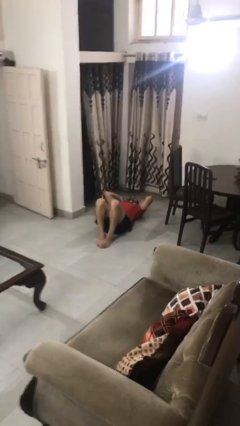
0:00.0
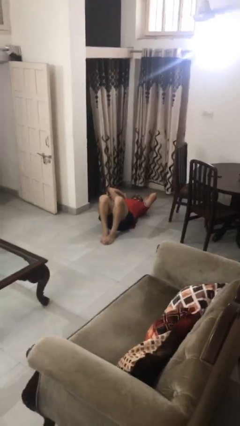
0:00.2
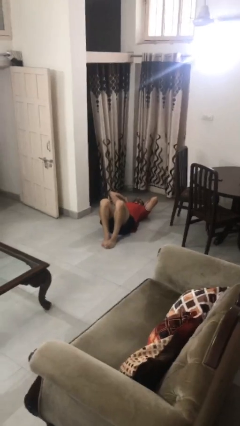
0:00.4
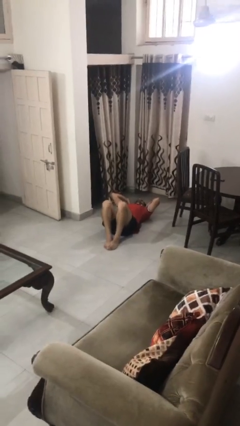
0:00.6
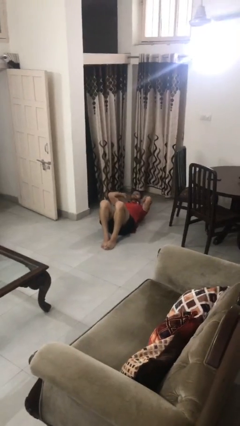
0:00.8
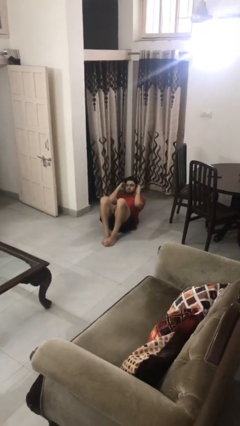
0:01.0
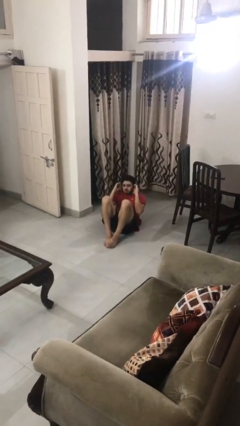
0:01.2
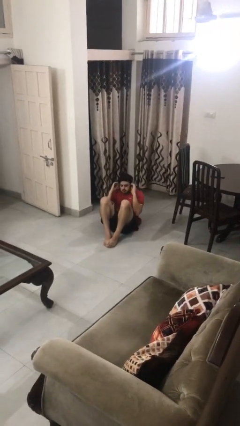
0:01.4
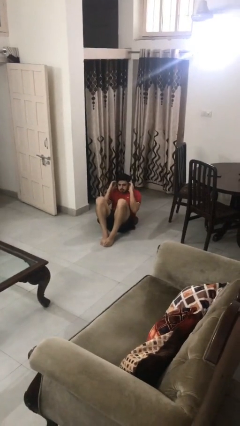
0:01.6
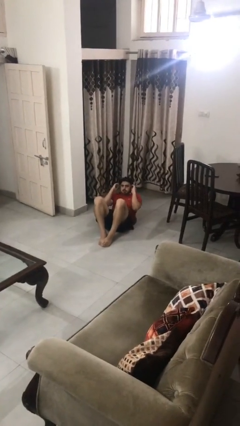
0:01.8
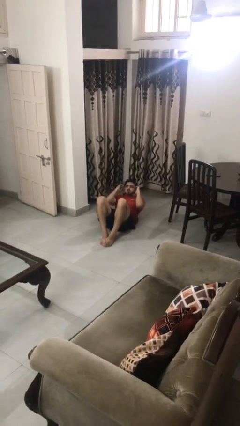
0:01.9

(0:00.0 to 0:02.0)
person exercises with situp

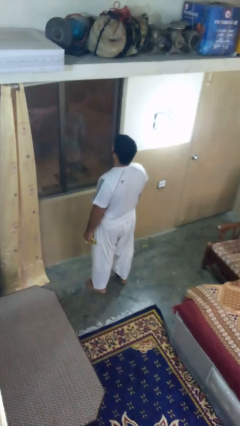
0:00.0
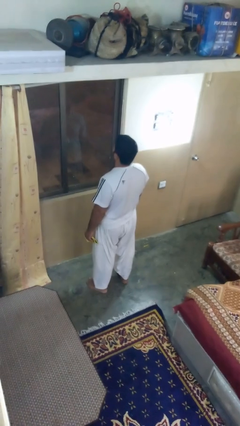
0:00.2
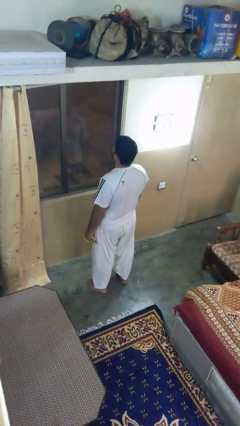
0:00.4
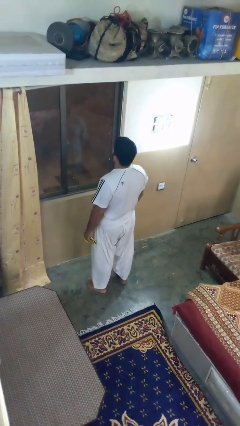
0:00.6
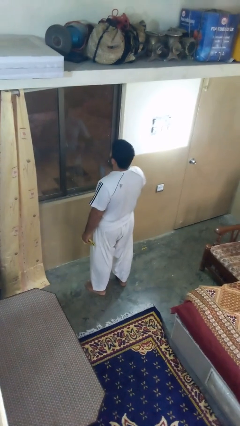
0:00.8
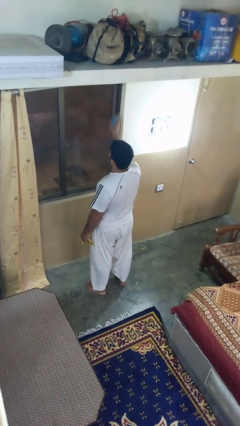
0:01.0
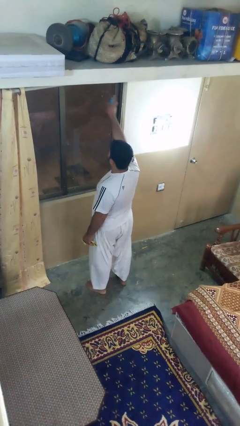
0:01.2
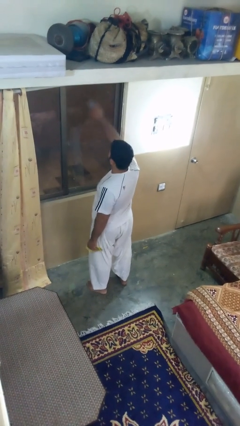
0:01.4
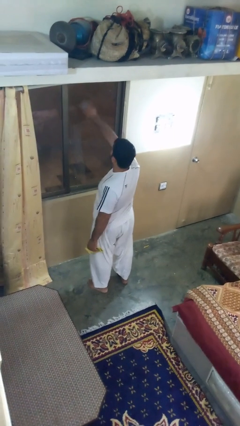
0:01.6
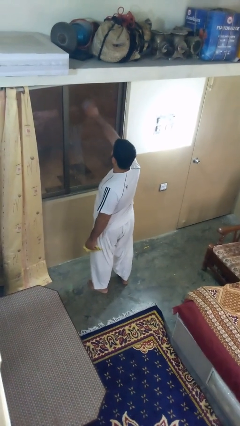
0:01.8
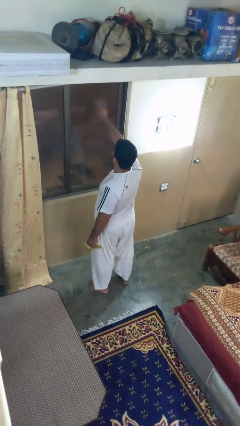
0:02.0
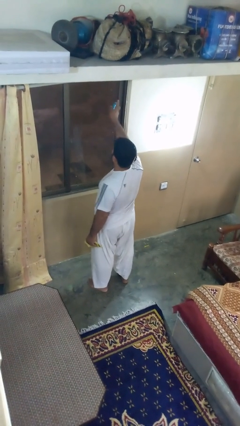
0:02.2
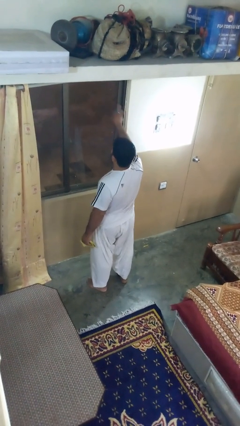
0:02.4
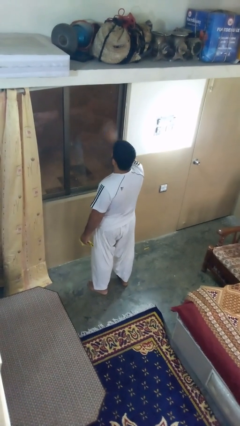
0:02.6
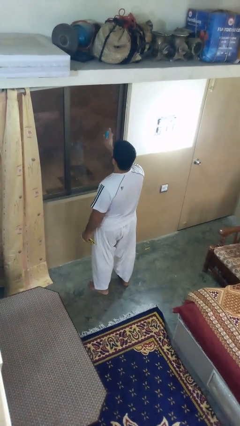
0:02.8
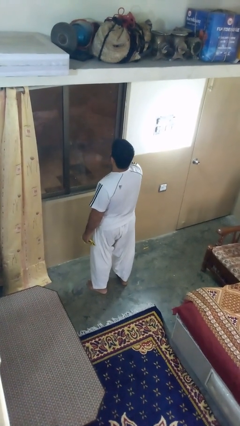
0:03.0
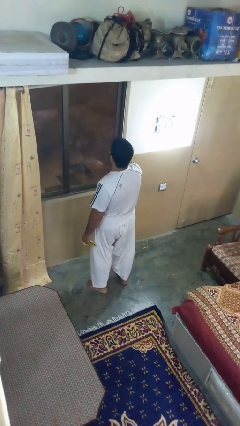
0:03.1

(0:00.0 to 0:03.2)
person sprays from bottle

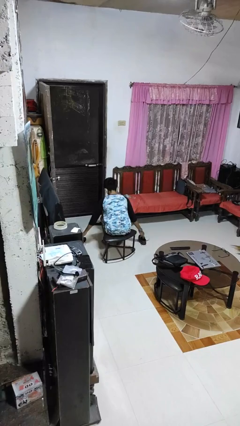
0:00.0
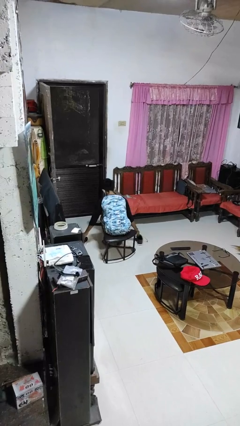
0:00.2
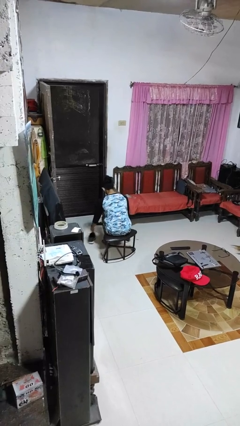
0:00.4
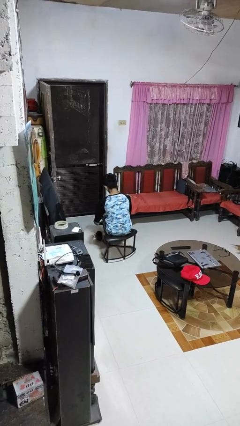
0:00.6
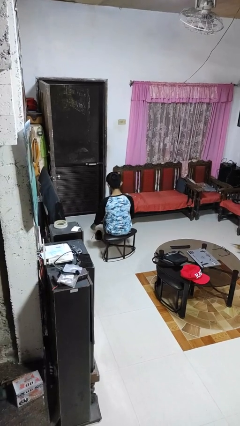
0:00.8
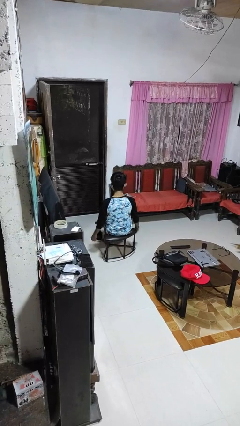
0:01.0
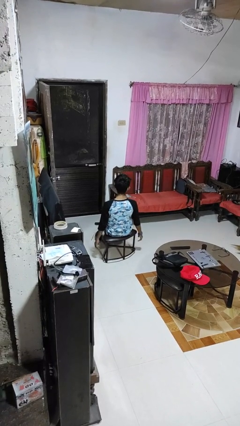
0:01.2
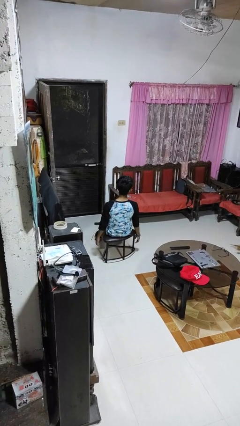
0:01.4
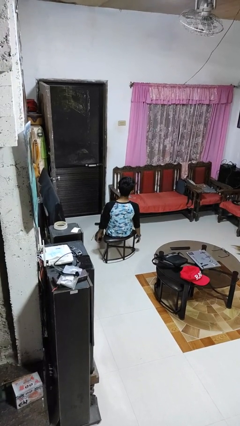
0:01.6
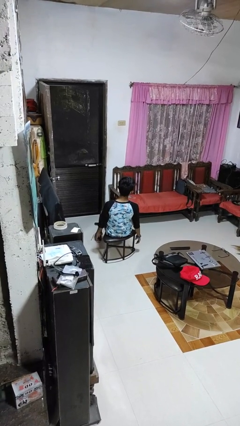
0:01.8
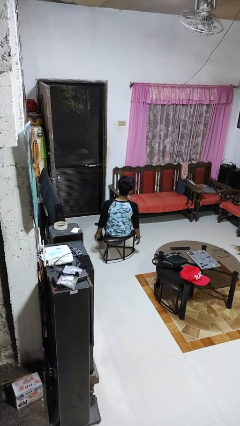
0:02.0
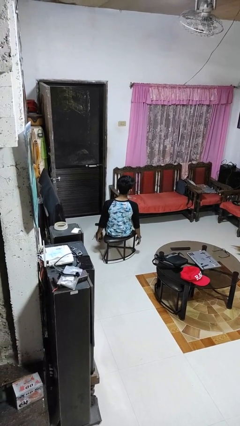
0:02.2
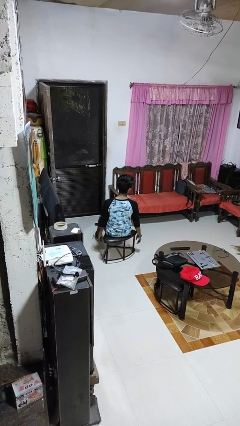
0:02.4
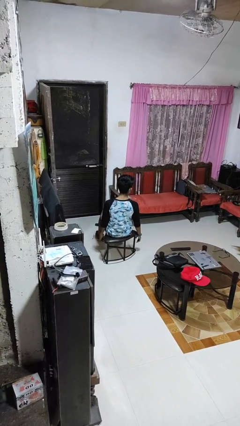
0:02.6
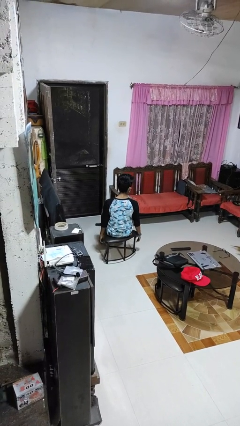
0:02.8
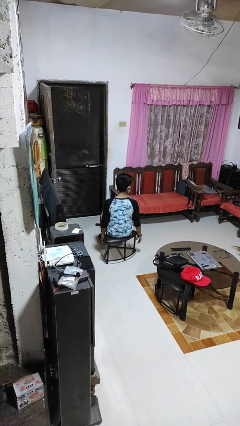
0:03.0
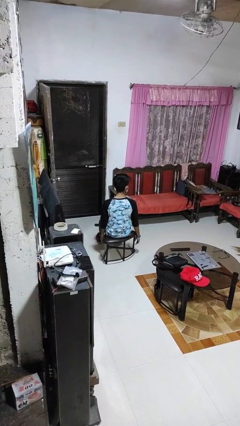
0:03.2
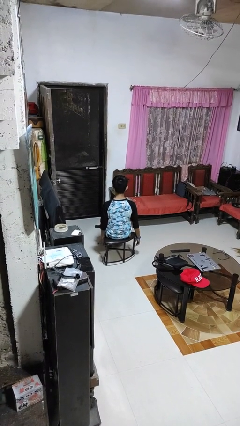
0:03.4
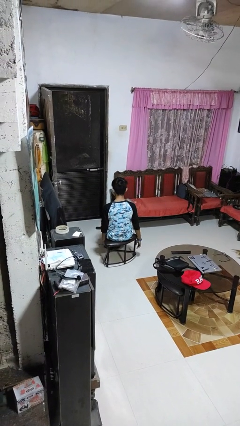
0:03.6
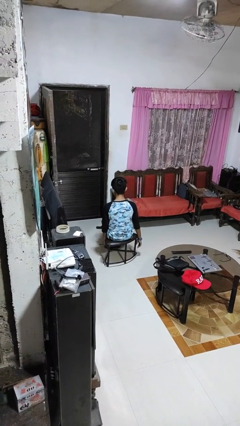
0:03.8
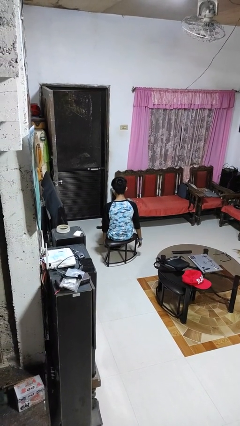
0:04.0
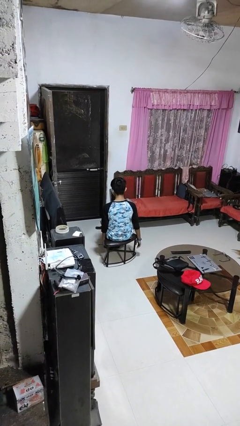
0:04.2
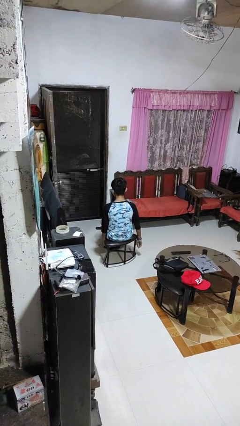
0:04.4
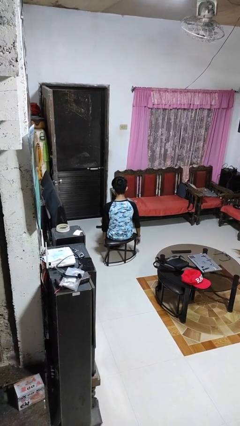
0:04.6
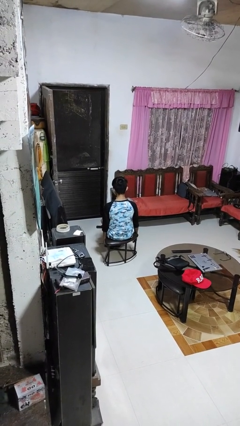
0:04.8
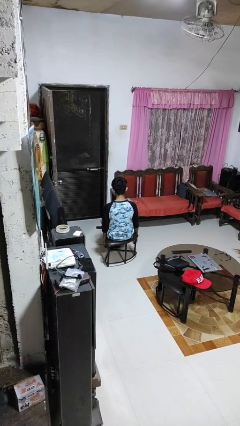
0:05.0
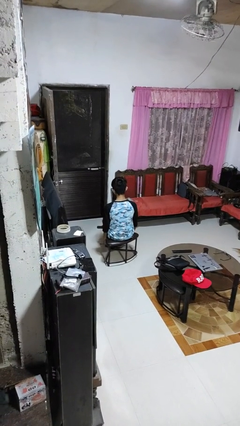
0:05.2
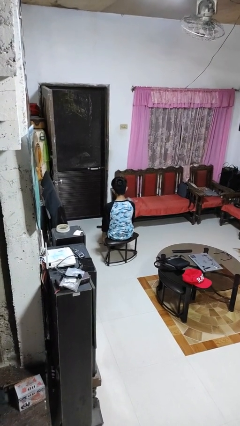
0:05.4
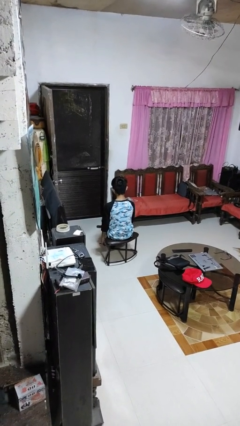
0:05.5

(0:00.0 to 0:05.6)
person puts on shoes

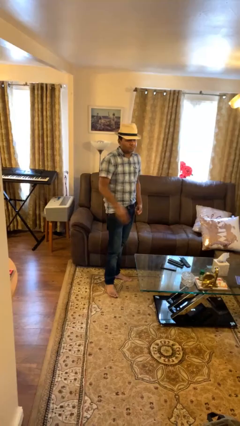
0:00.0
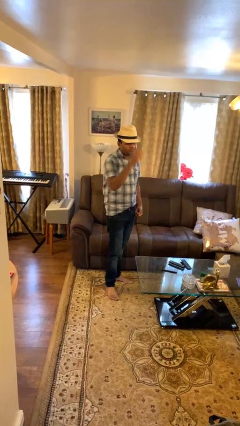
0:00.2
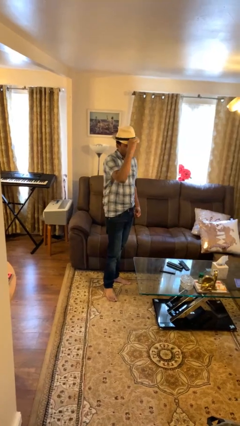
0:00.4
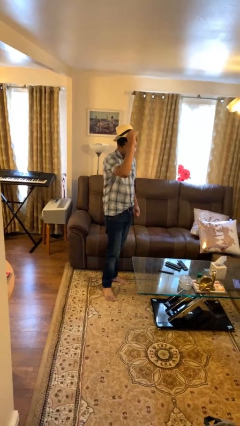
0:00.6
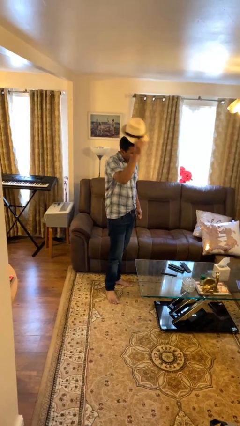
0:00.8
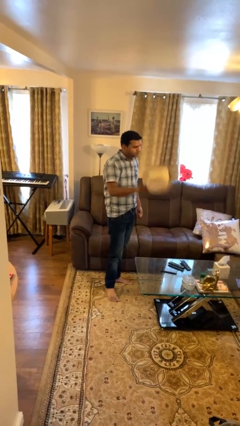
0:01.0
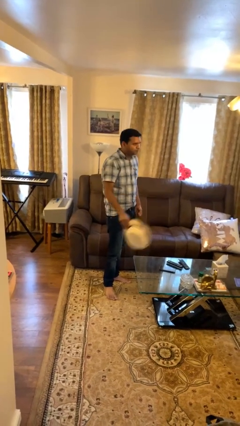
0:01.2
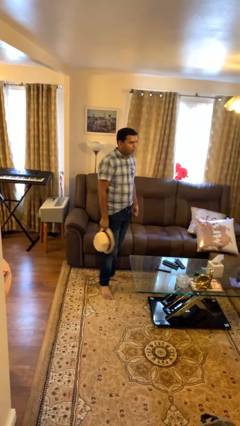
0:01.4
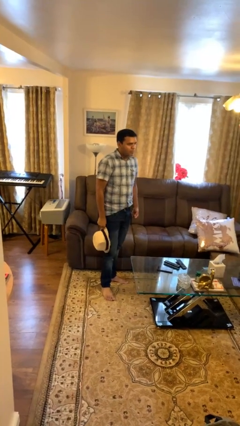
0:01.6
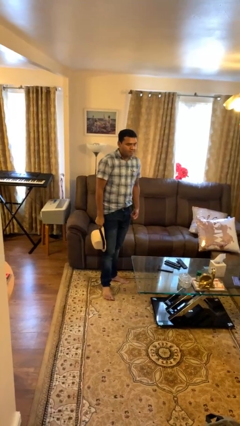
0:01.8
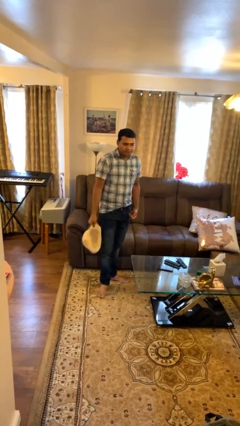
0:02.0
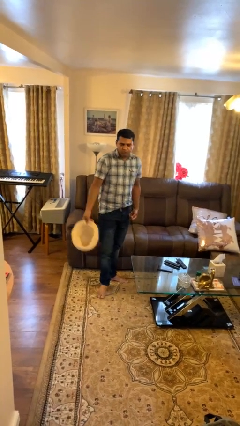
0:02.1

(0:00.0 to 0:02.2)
person takes off hat

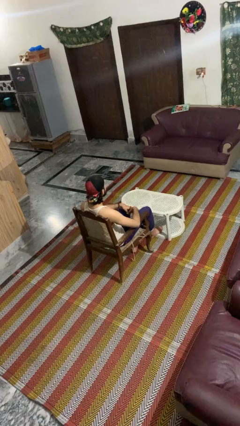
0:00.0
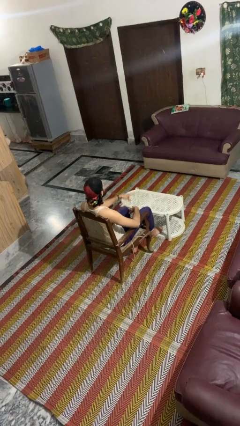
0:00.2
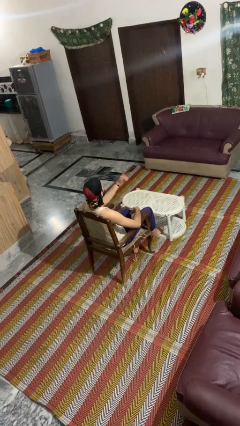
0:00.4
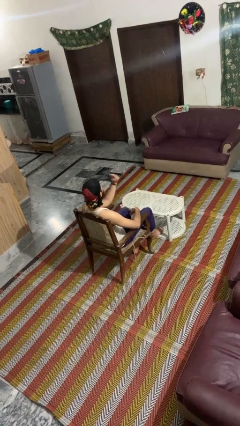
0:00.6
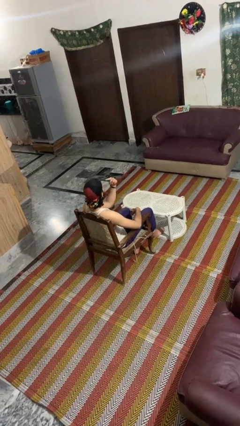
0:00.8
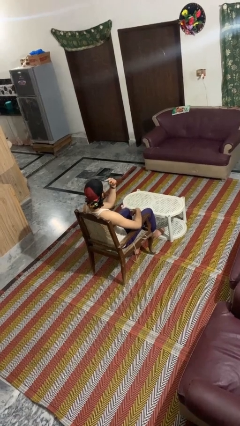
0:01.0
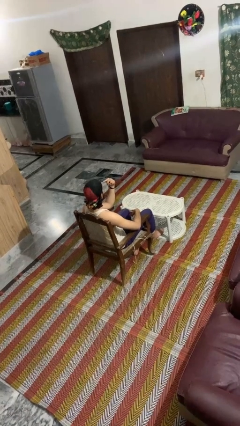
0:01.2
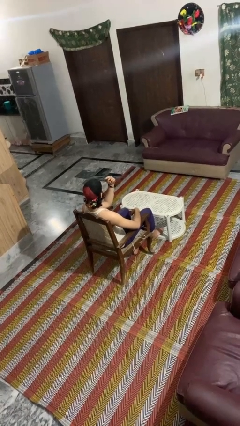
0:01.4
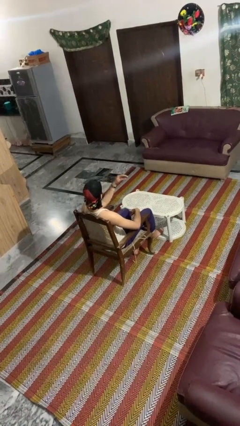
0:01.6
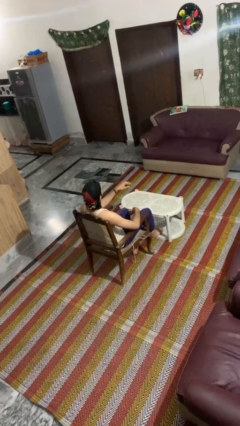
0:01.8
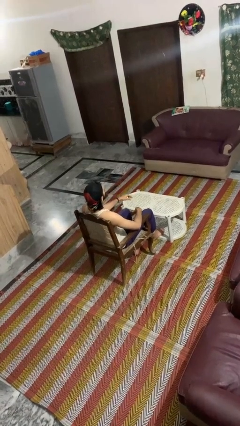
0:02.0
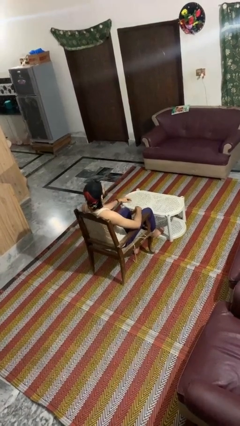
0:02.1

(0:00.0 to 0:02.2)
person gestures watch closely

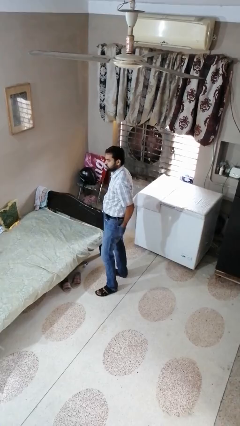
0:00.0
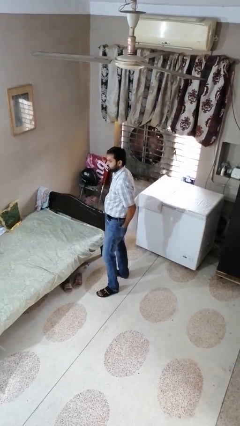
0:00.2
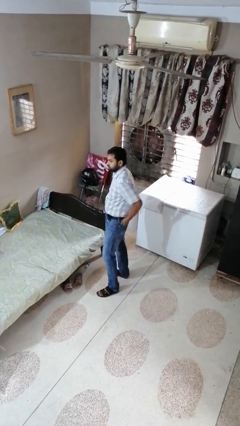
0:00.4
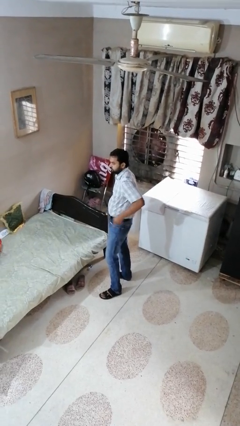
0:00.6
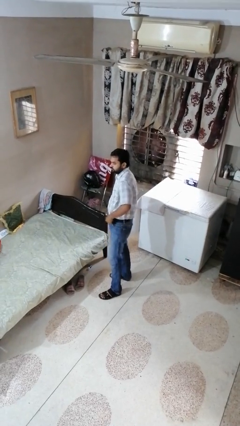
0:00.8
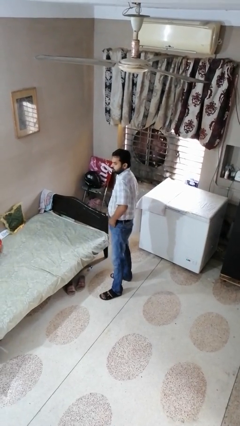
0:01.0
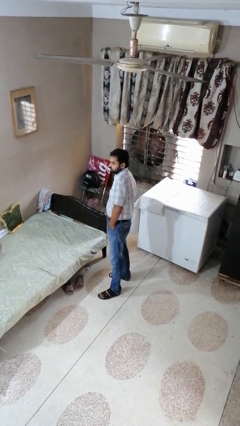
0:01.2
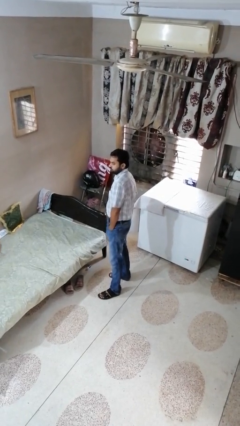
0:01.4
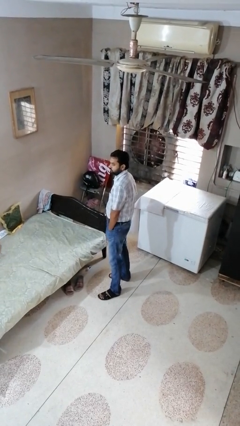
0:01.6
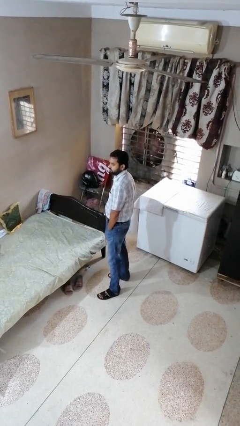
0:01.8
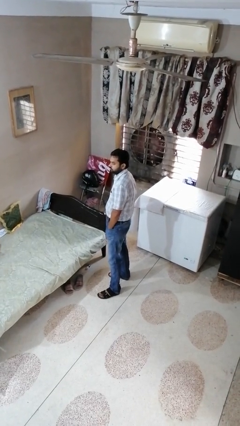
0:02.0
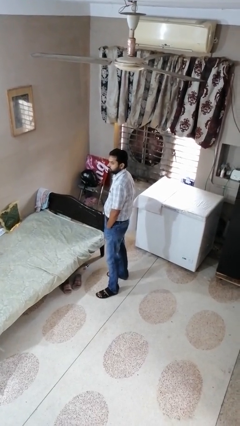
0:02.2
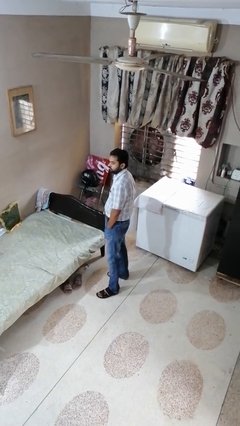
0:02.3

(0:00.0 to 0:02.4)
person puts hands in back pockets
